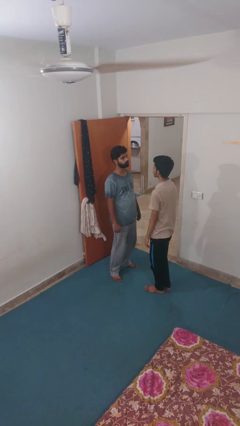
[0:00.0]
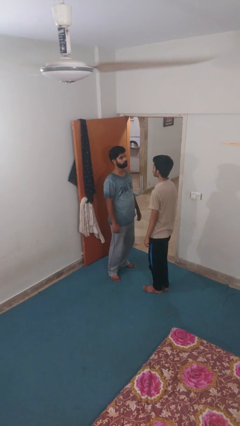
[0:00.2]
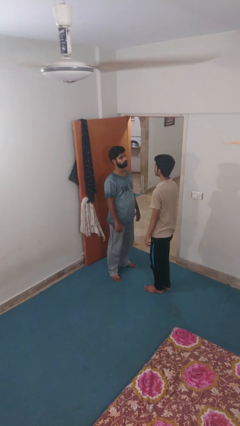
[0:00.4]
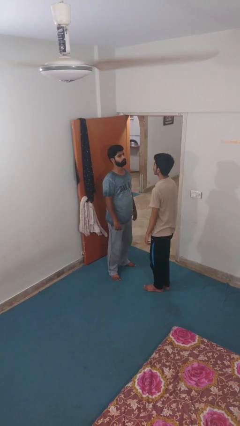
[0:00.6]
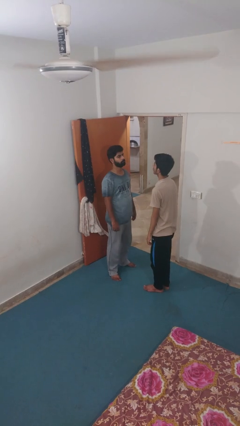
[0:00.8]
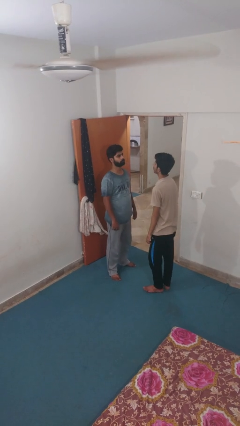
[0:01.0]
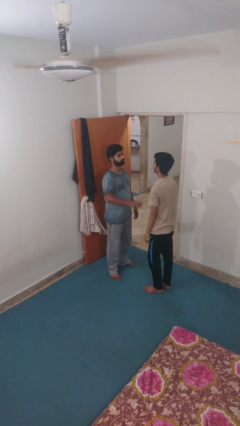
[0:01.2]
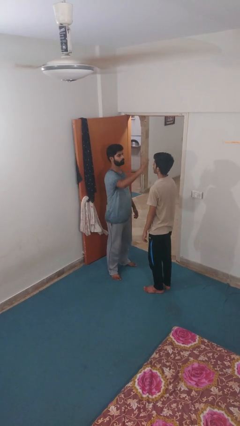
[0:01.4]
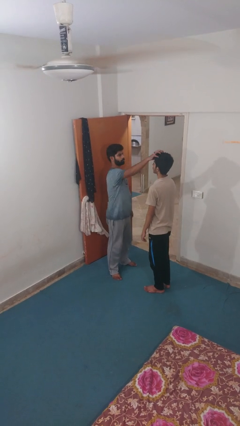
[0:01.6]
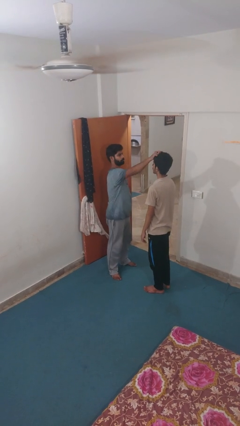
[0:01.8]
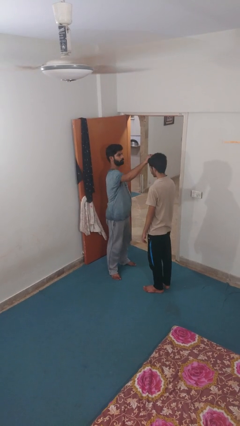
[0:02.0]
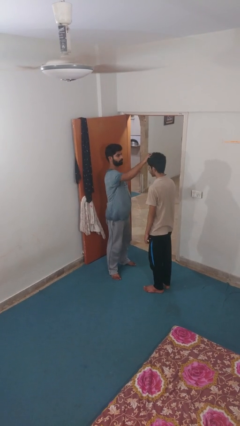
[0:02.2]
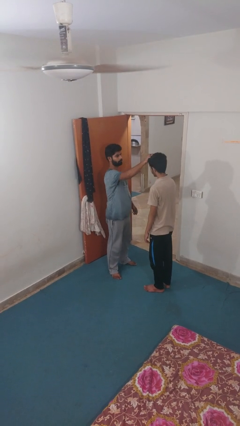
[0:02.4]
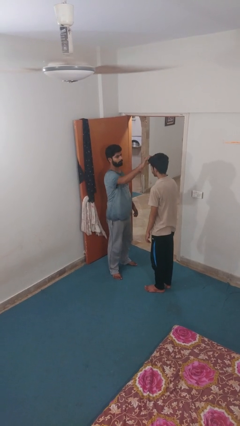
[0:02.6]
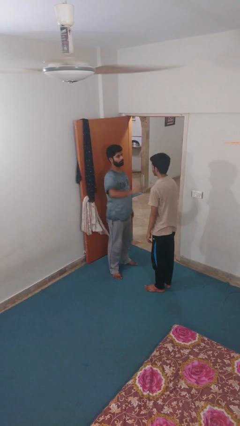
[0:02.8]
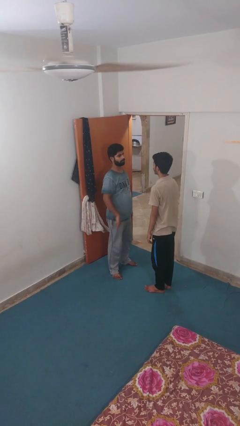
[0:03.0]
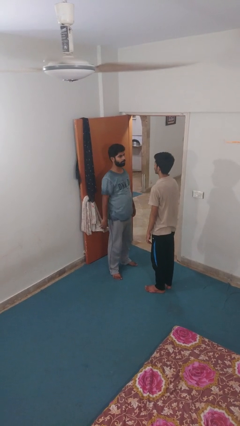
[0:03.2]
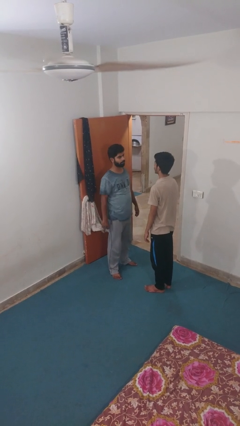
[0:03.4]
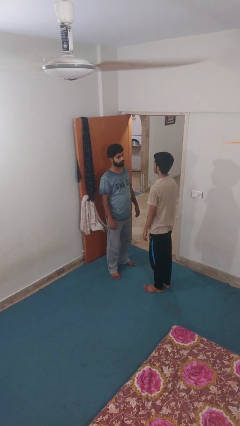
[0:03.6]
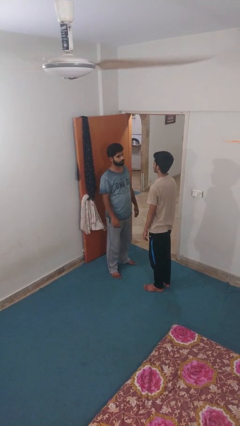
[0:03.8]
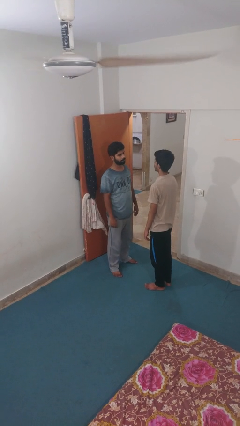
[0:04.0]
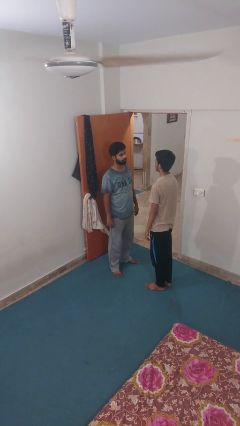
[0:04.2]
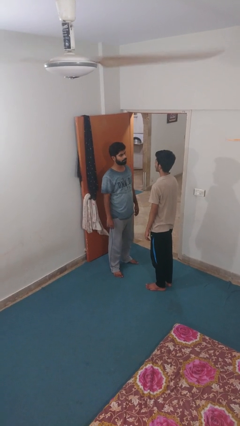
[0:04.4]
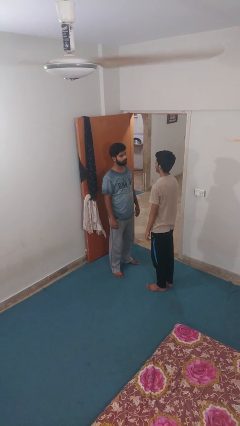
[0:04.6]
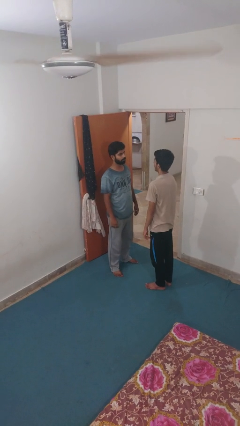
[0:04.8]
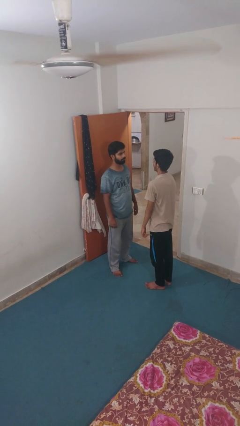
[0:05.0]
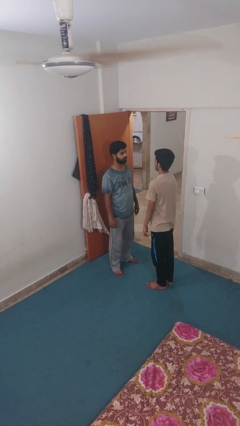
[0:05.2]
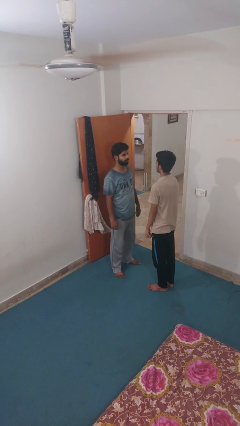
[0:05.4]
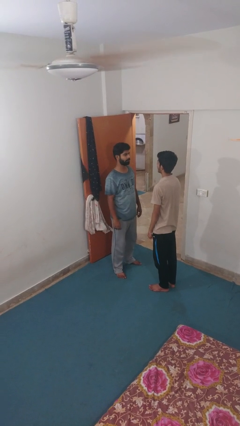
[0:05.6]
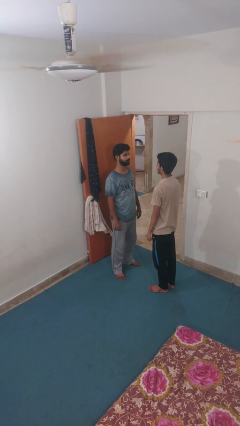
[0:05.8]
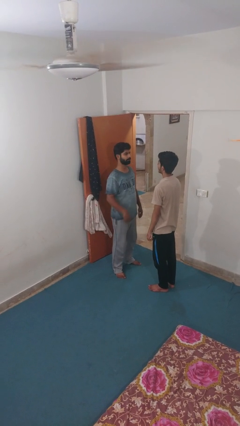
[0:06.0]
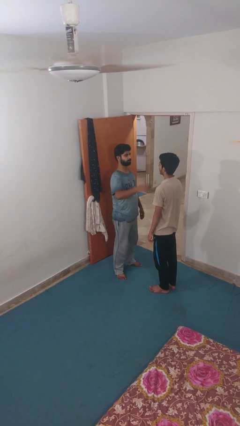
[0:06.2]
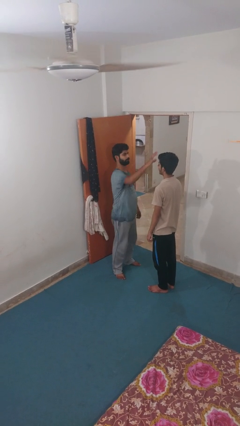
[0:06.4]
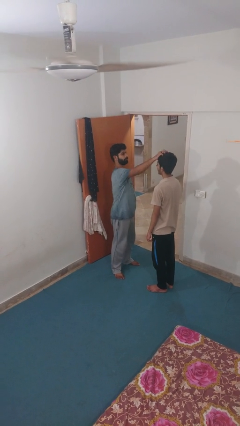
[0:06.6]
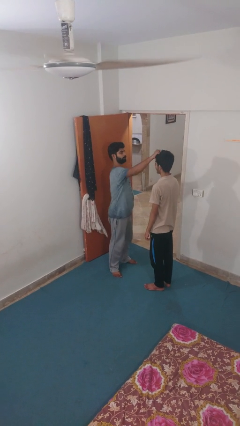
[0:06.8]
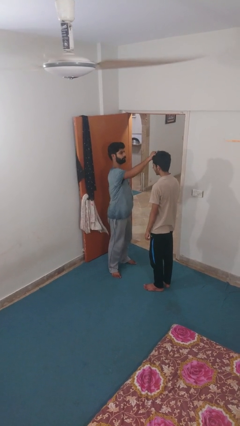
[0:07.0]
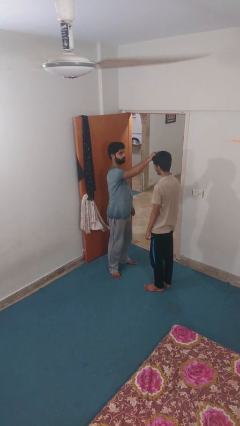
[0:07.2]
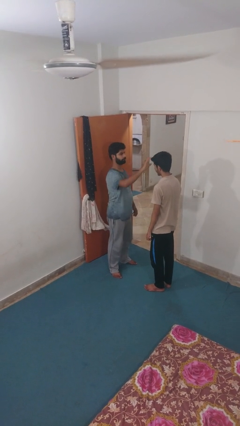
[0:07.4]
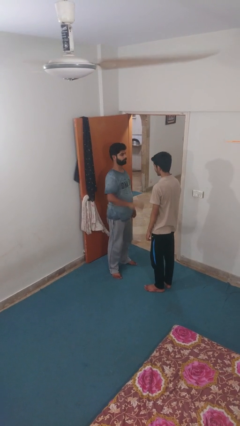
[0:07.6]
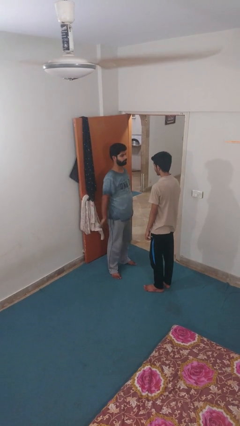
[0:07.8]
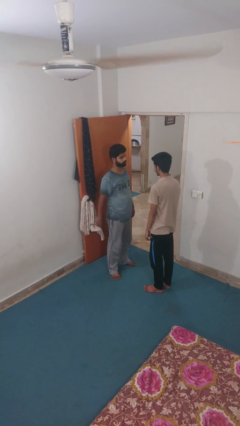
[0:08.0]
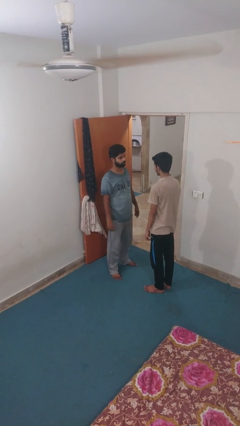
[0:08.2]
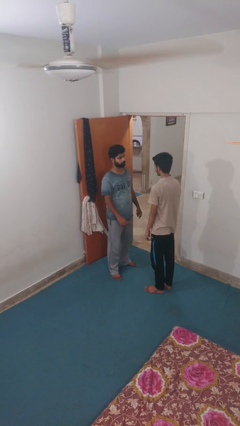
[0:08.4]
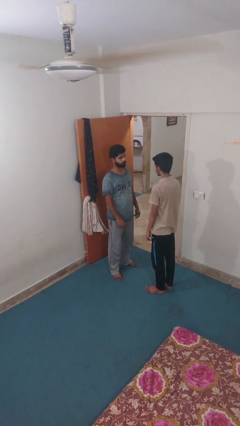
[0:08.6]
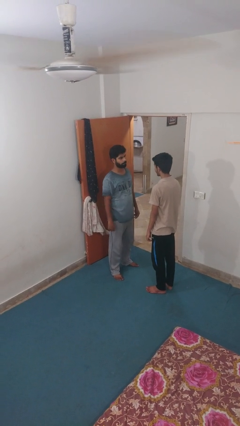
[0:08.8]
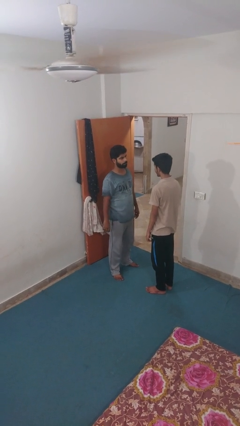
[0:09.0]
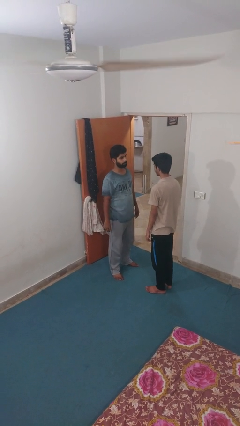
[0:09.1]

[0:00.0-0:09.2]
person grabs person by hair

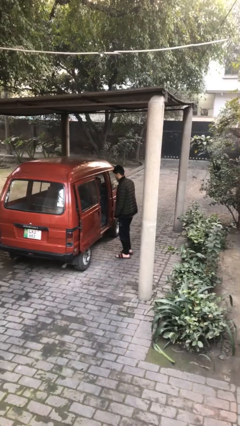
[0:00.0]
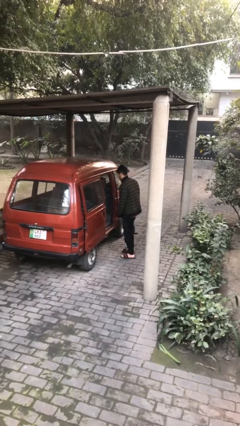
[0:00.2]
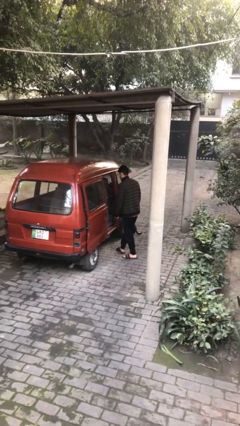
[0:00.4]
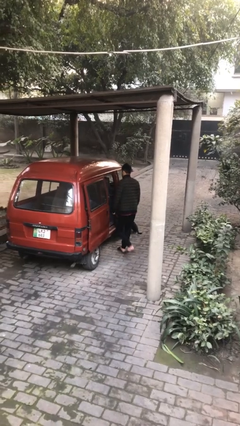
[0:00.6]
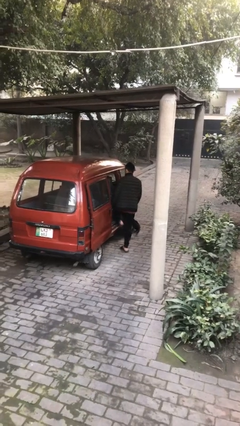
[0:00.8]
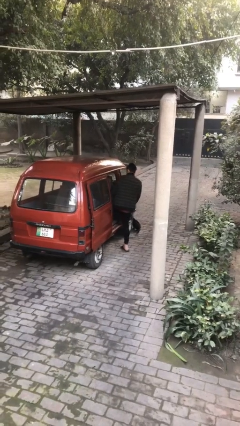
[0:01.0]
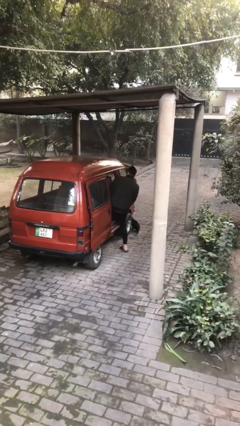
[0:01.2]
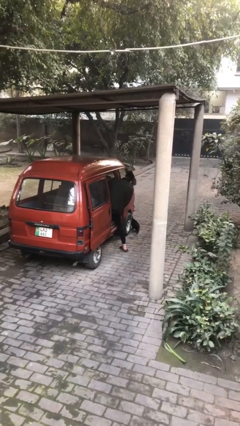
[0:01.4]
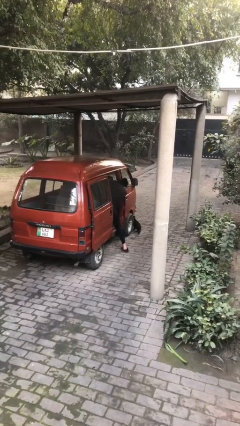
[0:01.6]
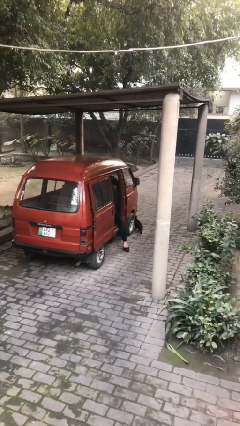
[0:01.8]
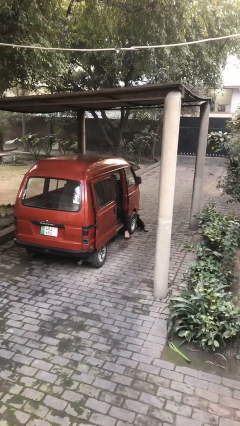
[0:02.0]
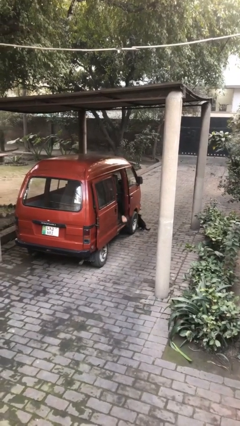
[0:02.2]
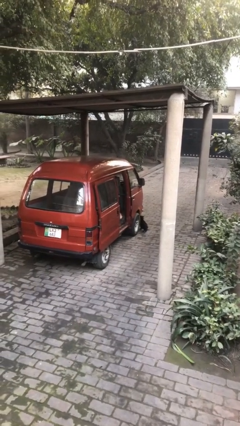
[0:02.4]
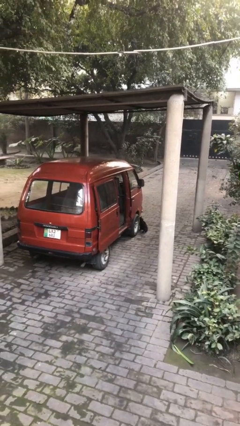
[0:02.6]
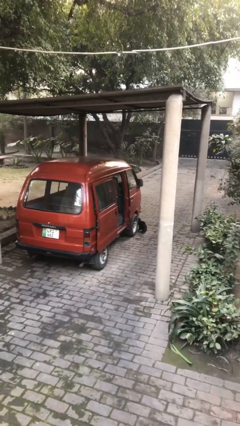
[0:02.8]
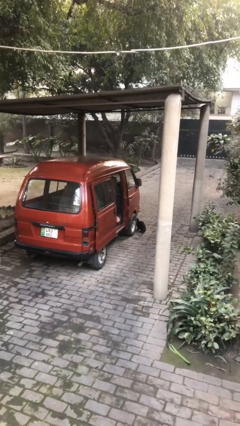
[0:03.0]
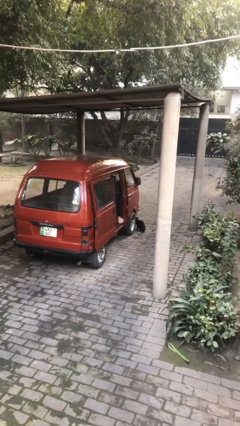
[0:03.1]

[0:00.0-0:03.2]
person enters car

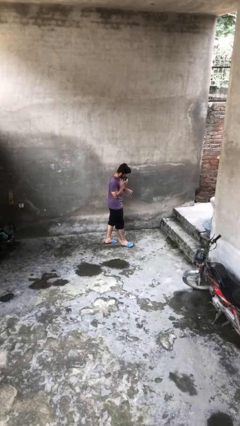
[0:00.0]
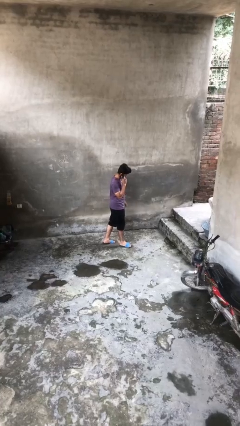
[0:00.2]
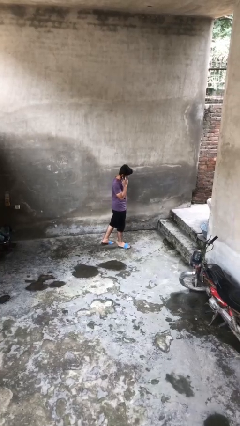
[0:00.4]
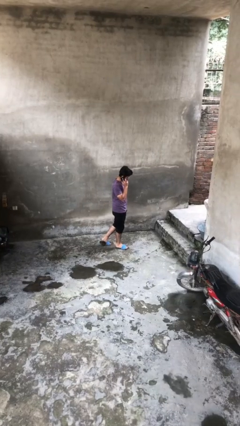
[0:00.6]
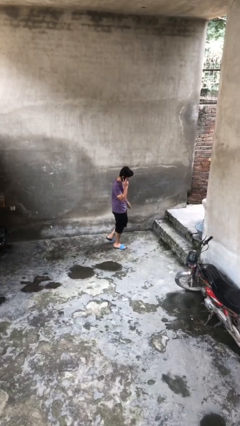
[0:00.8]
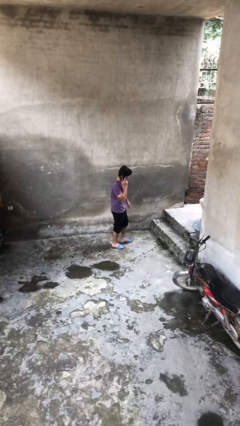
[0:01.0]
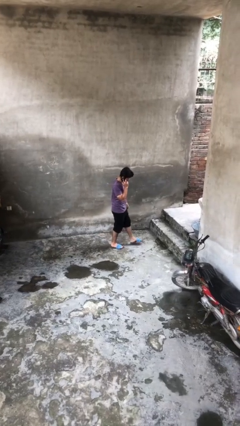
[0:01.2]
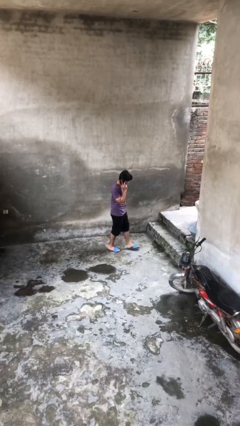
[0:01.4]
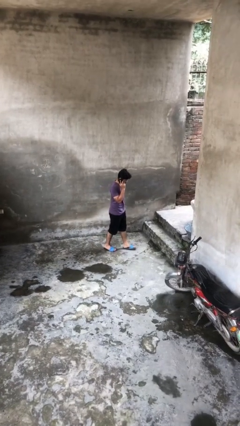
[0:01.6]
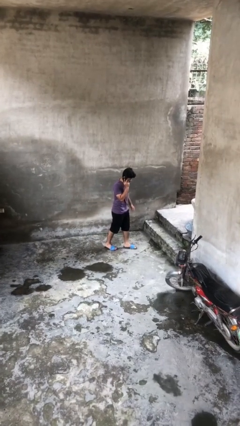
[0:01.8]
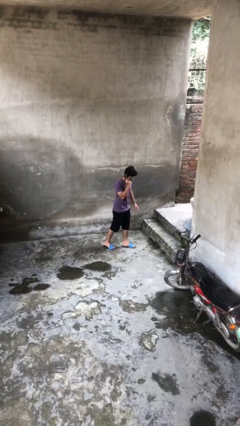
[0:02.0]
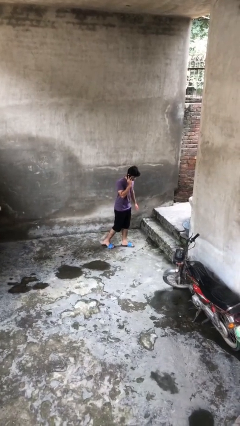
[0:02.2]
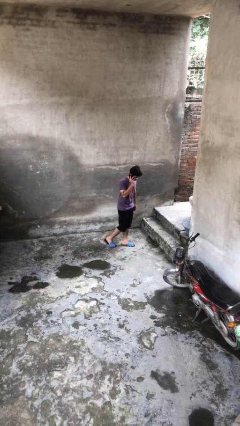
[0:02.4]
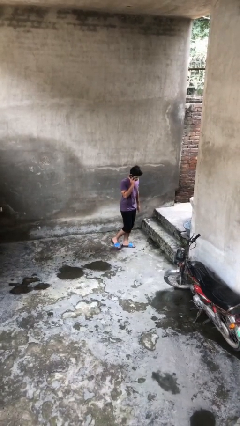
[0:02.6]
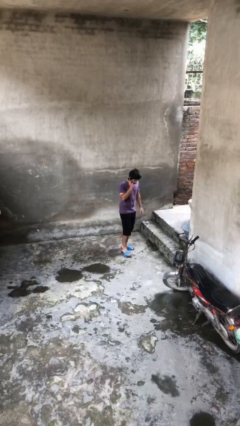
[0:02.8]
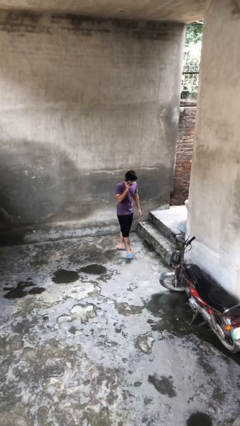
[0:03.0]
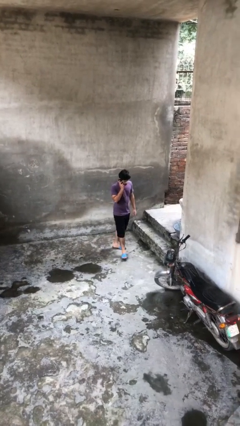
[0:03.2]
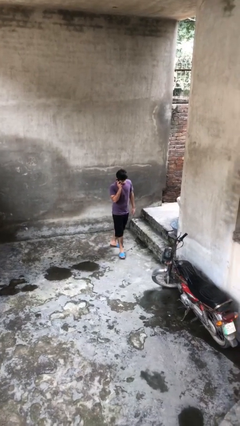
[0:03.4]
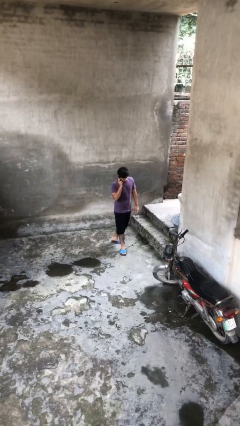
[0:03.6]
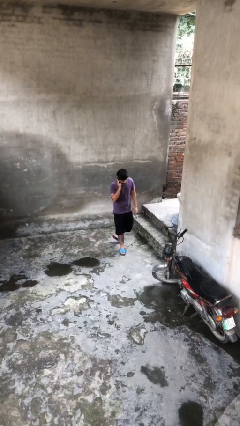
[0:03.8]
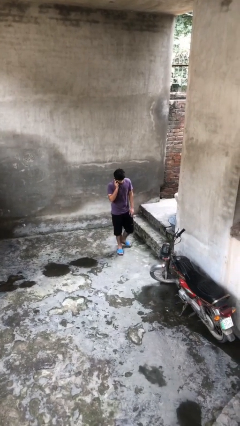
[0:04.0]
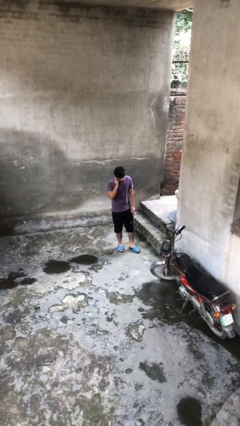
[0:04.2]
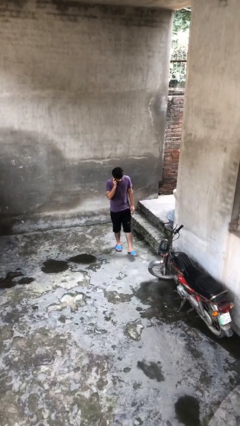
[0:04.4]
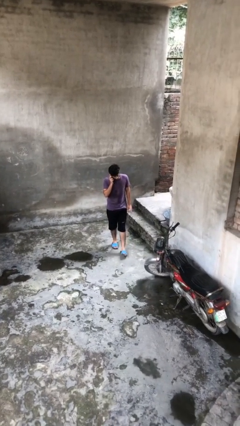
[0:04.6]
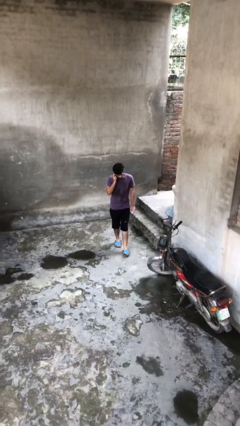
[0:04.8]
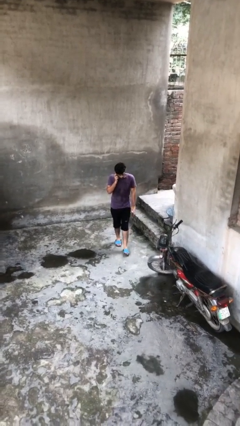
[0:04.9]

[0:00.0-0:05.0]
person talks on phone

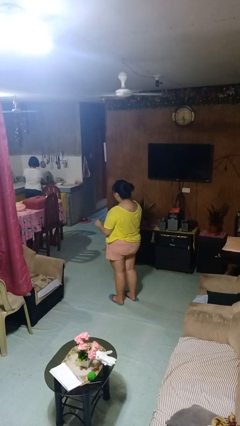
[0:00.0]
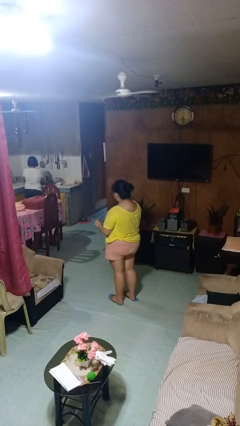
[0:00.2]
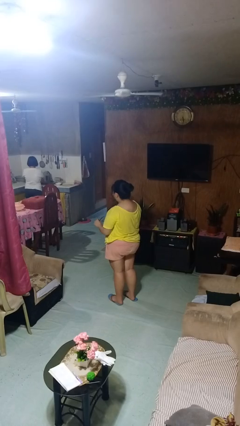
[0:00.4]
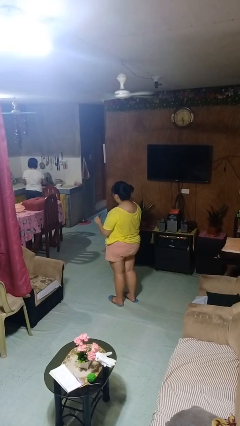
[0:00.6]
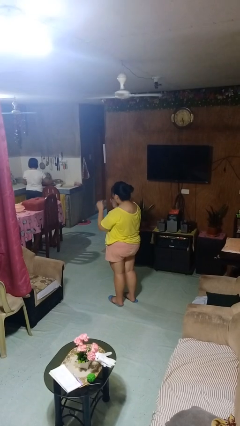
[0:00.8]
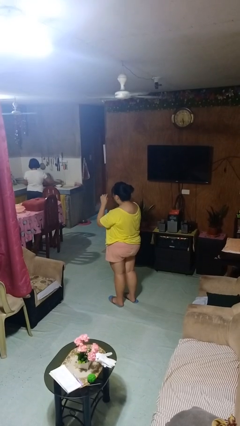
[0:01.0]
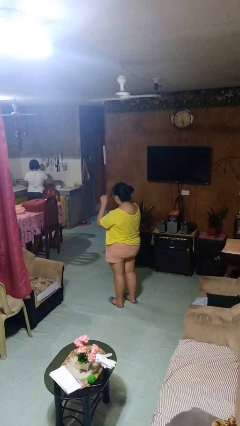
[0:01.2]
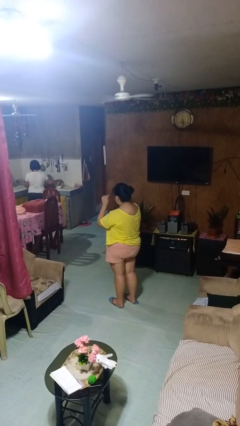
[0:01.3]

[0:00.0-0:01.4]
person puts on glasses
